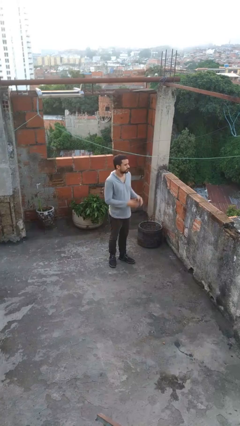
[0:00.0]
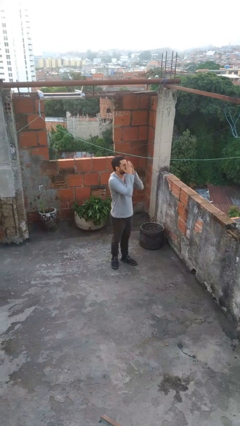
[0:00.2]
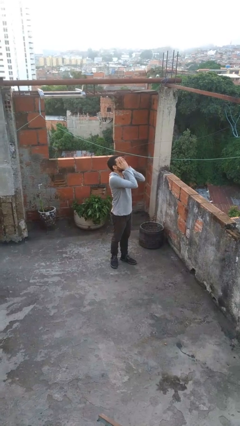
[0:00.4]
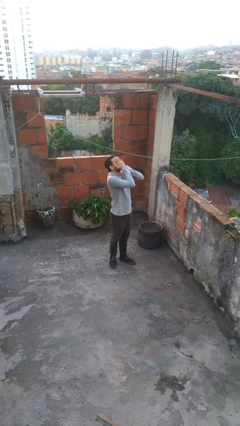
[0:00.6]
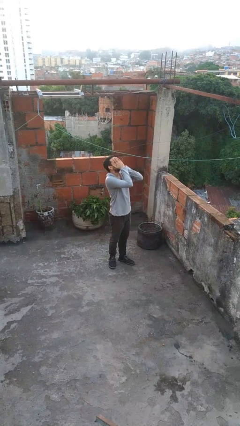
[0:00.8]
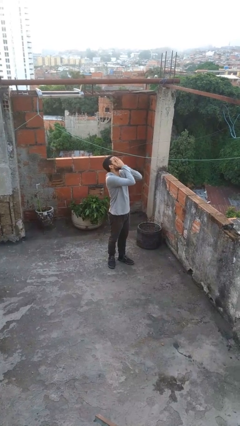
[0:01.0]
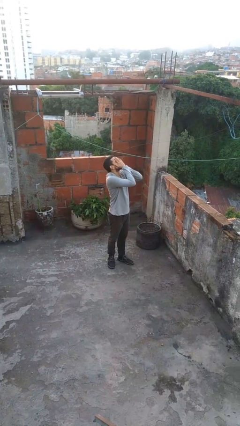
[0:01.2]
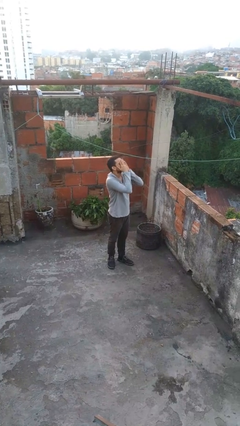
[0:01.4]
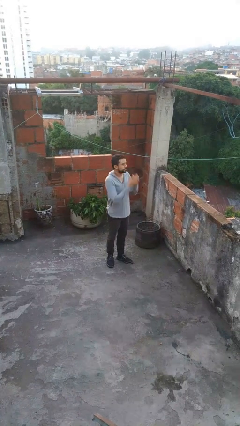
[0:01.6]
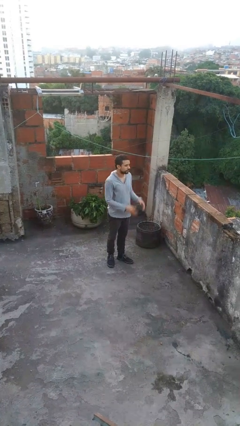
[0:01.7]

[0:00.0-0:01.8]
person covers face with hands

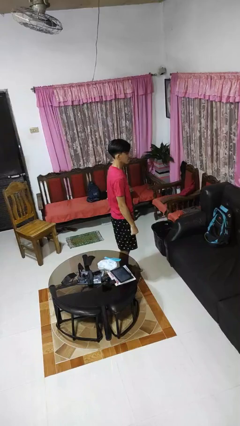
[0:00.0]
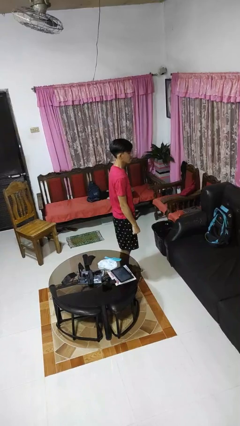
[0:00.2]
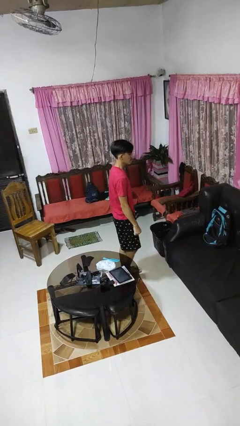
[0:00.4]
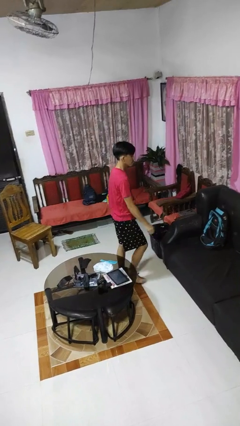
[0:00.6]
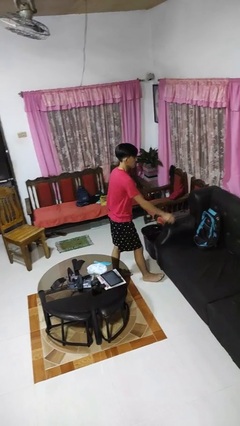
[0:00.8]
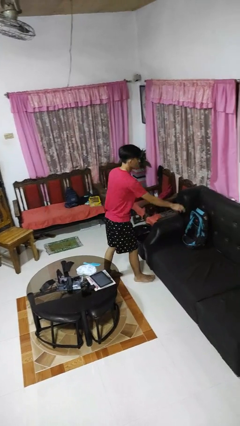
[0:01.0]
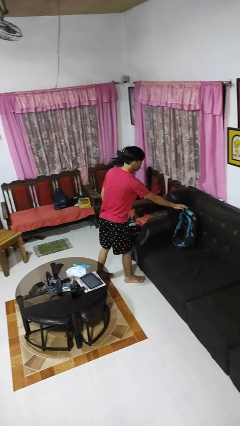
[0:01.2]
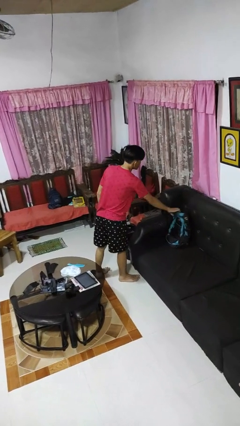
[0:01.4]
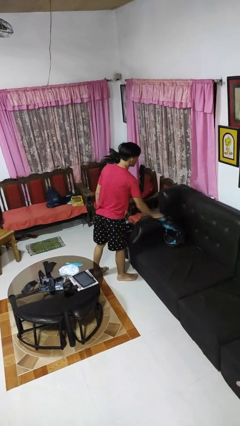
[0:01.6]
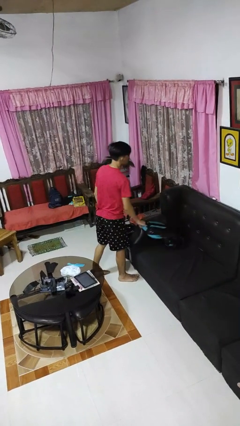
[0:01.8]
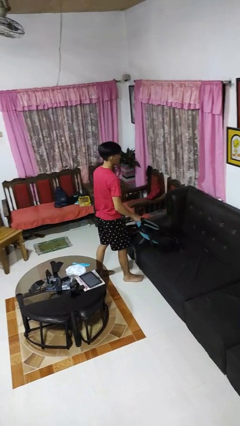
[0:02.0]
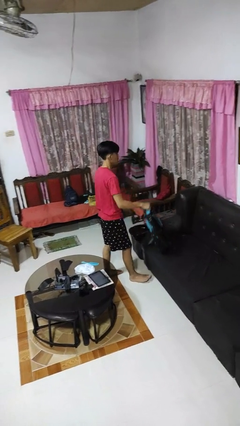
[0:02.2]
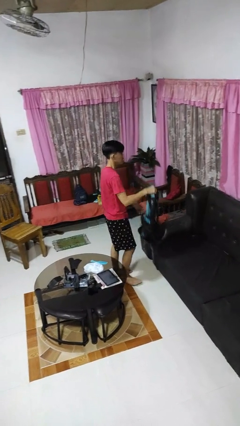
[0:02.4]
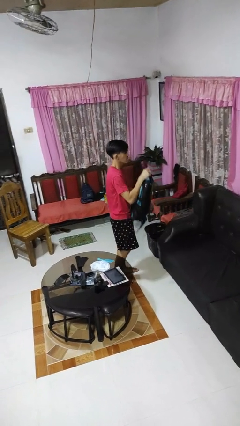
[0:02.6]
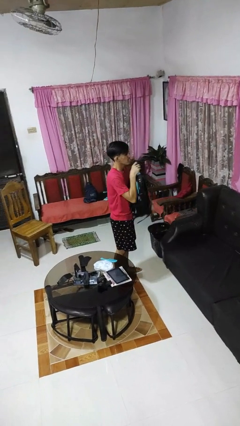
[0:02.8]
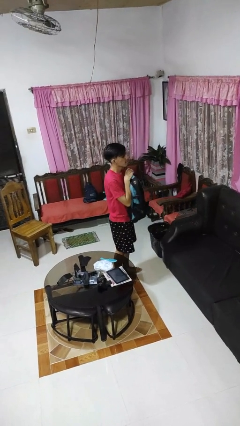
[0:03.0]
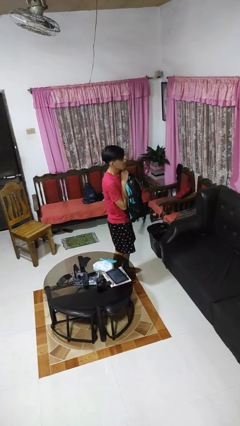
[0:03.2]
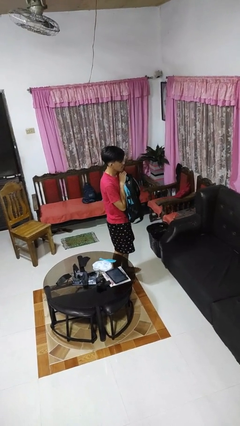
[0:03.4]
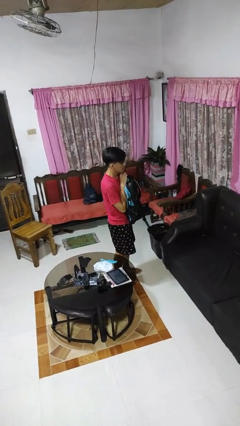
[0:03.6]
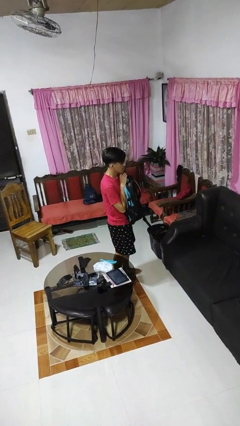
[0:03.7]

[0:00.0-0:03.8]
person picks up object from couch

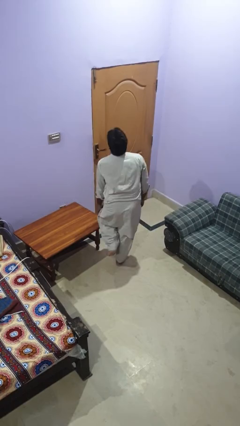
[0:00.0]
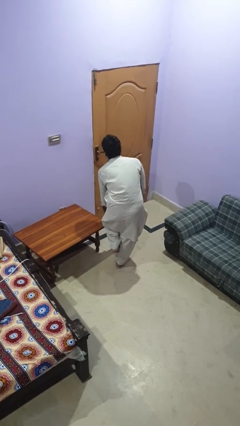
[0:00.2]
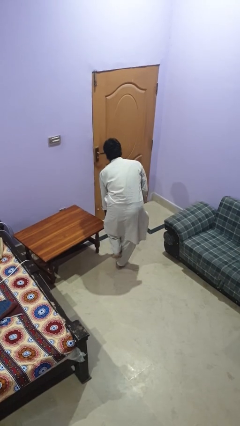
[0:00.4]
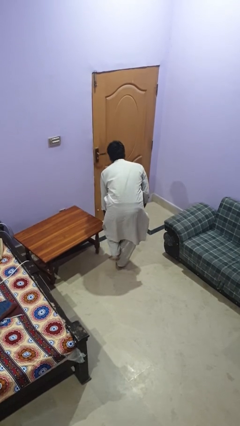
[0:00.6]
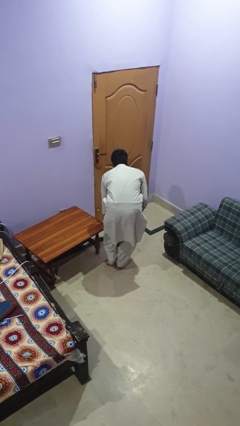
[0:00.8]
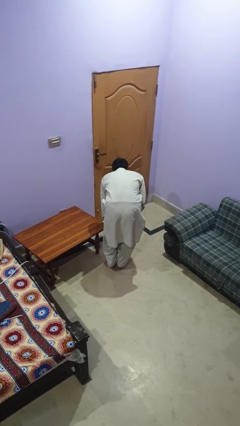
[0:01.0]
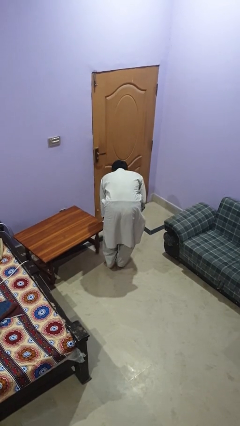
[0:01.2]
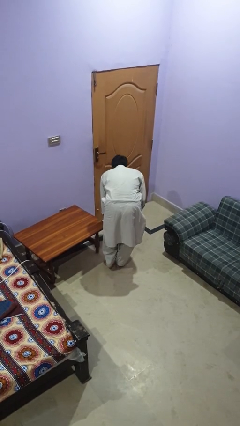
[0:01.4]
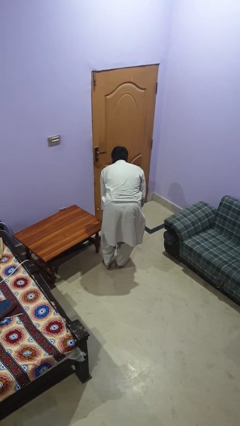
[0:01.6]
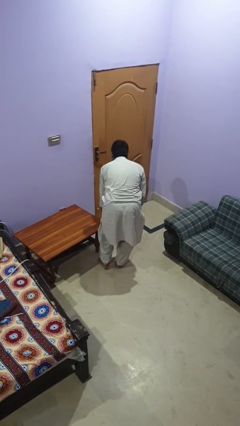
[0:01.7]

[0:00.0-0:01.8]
person bumps into table

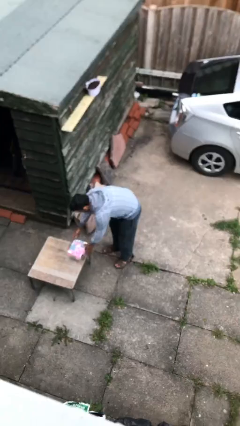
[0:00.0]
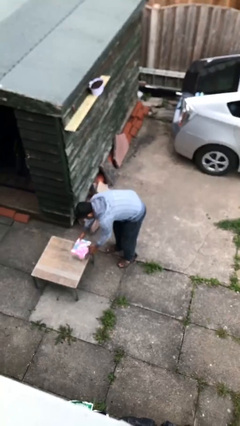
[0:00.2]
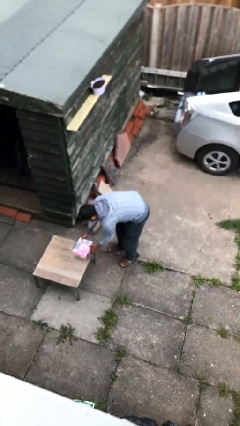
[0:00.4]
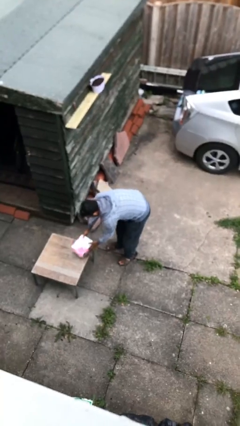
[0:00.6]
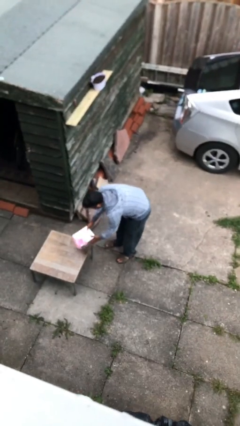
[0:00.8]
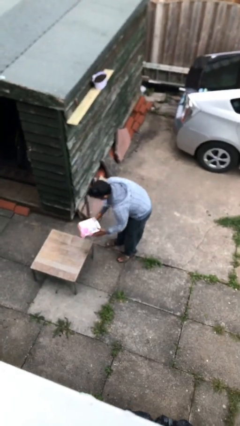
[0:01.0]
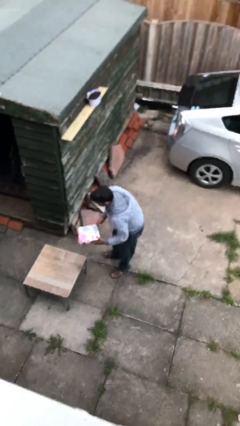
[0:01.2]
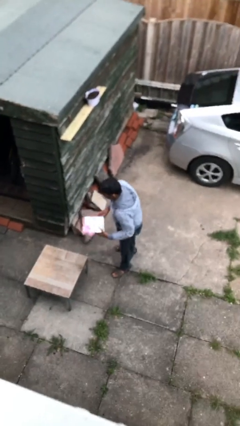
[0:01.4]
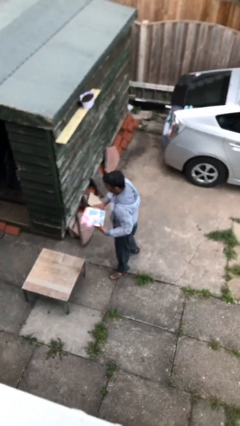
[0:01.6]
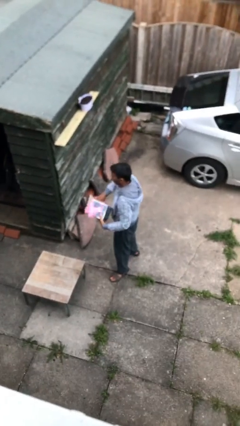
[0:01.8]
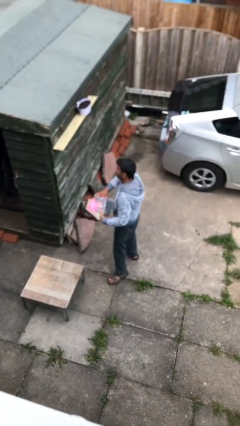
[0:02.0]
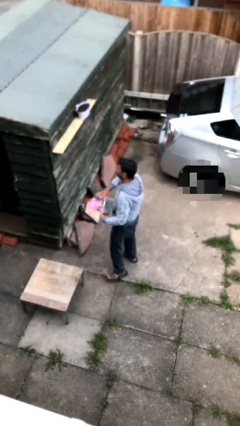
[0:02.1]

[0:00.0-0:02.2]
person picks up object from table

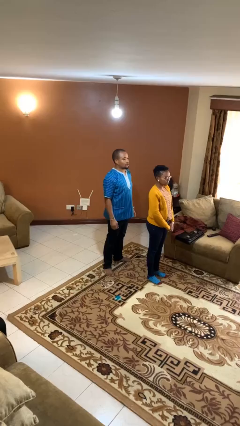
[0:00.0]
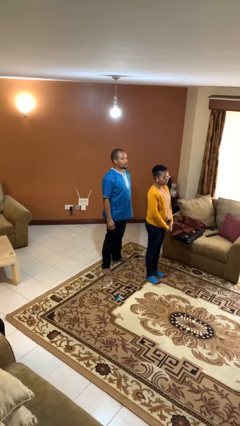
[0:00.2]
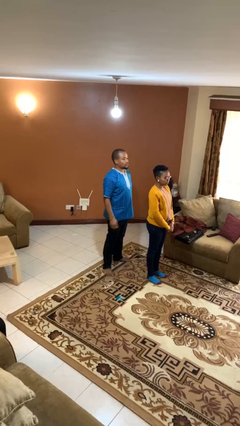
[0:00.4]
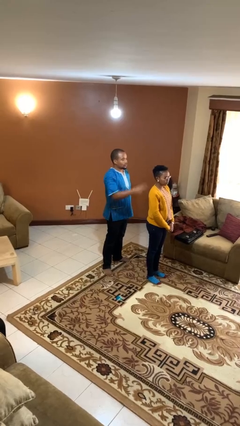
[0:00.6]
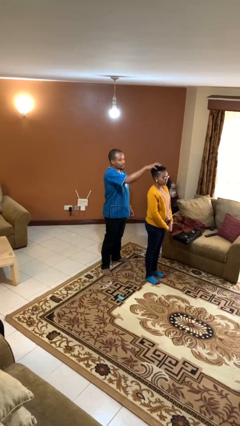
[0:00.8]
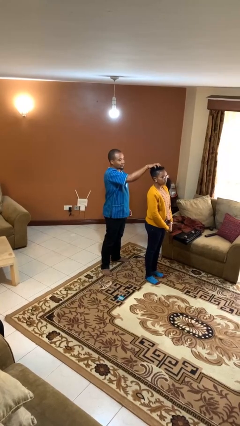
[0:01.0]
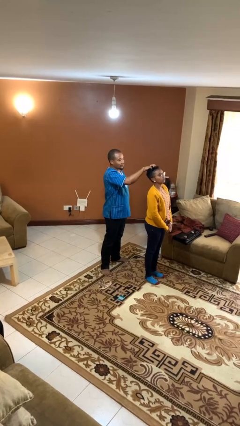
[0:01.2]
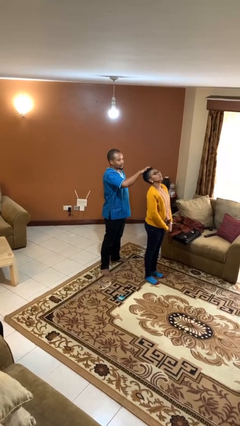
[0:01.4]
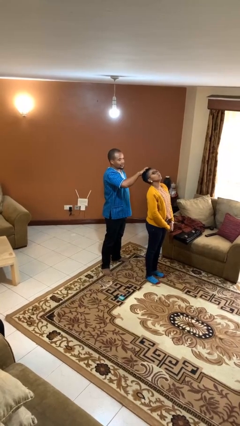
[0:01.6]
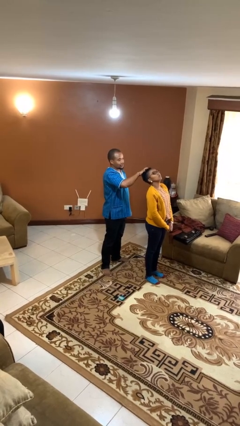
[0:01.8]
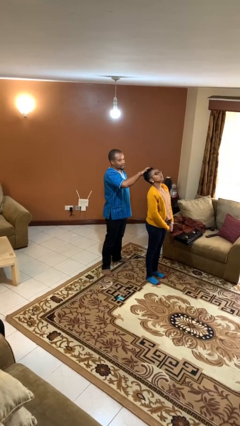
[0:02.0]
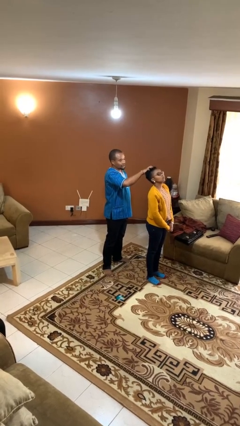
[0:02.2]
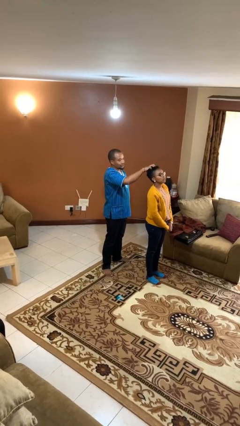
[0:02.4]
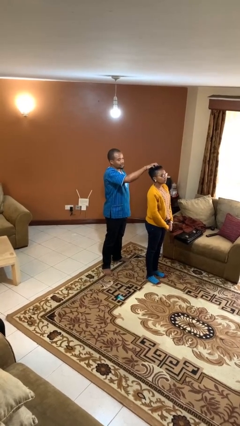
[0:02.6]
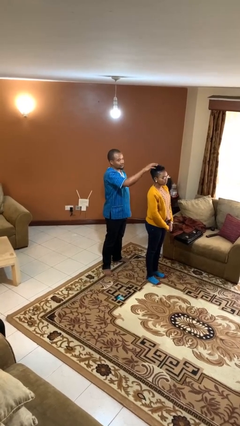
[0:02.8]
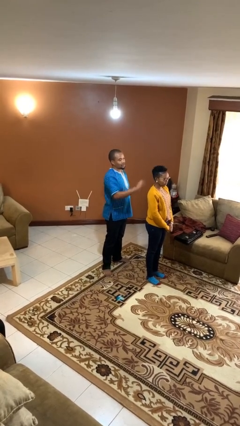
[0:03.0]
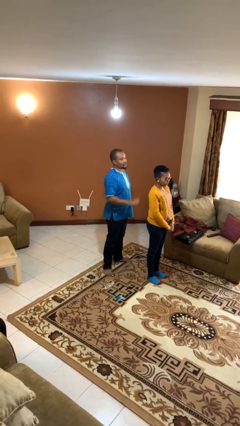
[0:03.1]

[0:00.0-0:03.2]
person grabs person by hair

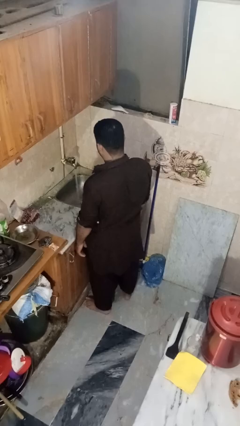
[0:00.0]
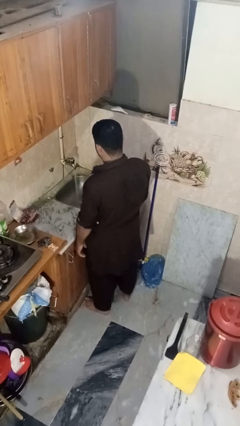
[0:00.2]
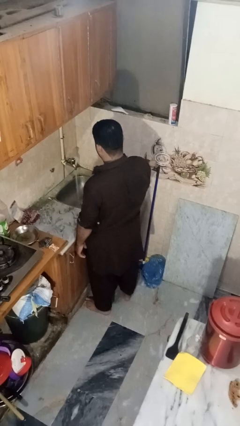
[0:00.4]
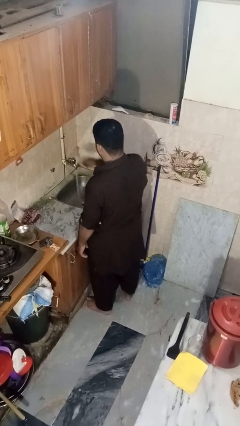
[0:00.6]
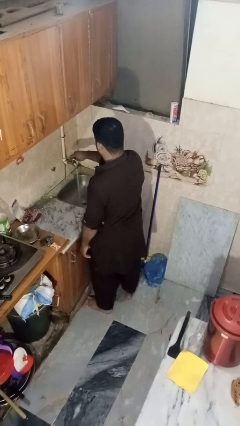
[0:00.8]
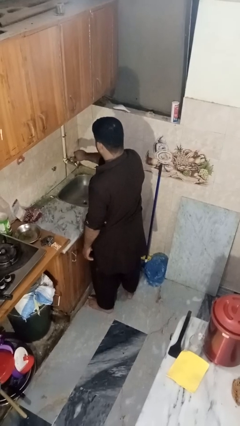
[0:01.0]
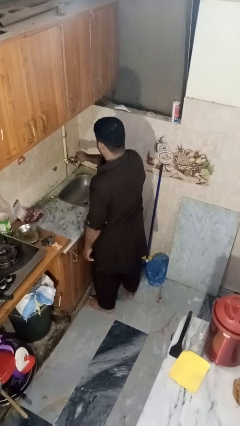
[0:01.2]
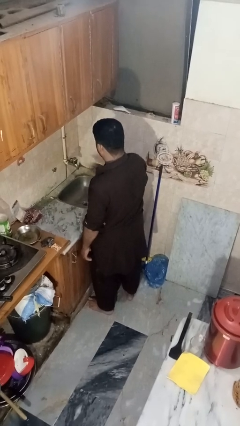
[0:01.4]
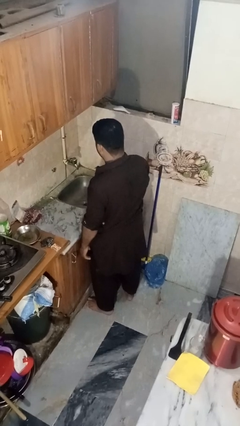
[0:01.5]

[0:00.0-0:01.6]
person turns off faucet

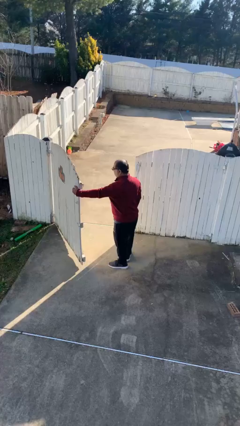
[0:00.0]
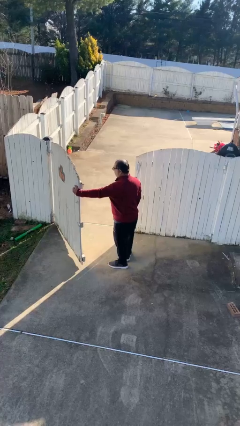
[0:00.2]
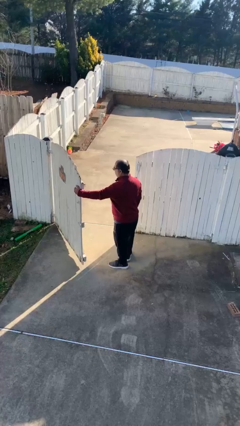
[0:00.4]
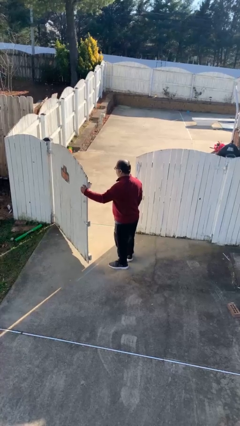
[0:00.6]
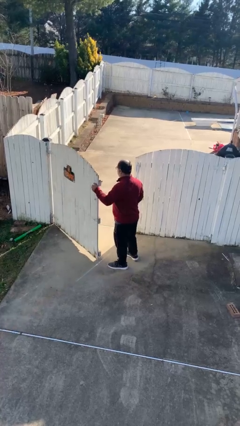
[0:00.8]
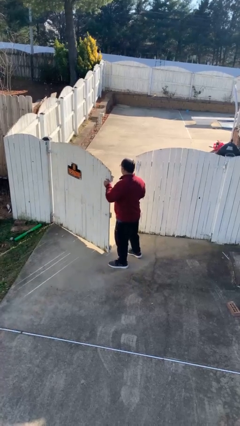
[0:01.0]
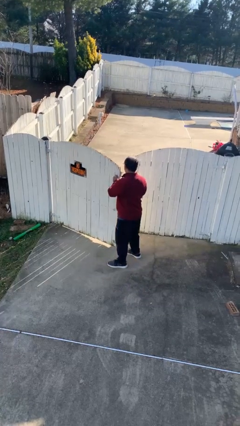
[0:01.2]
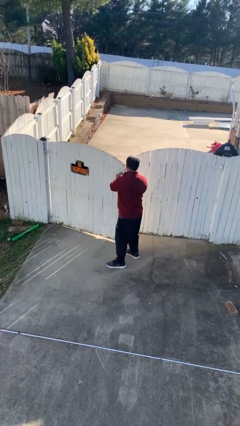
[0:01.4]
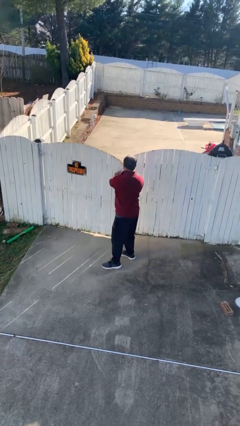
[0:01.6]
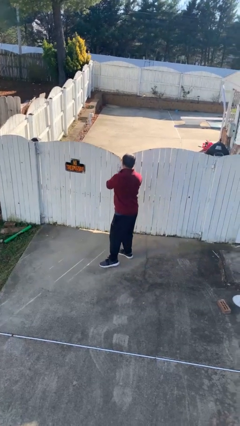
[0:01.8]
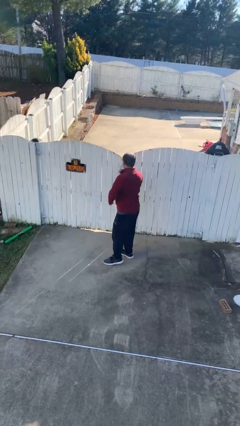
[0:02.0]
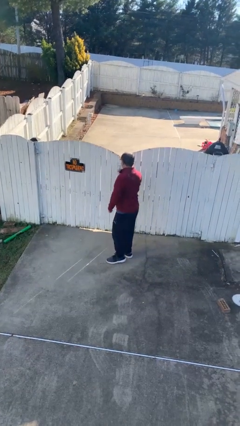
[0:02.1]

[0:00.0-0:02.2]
person closes facility door
